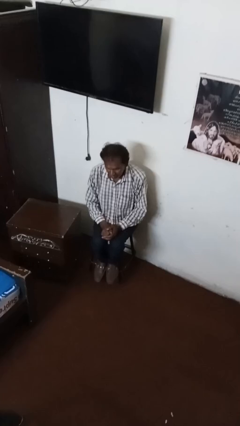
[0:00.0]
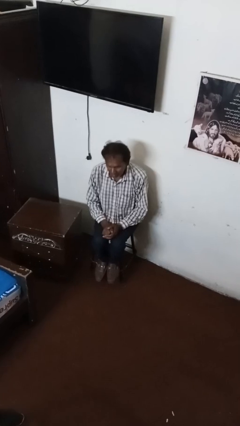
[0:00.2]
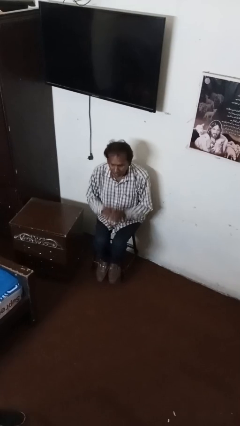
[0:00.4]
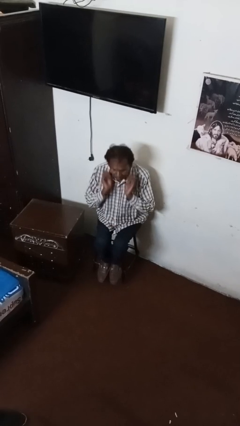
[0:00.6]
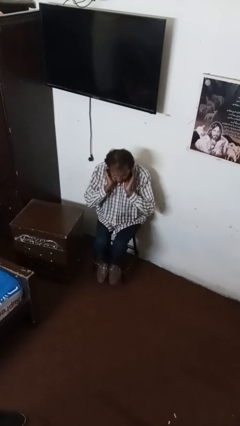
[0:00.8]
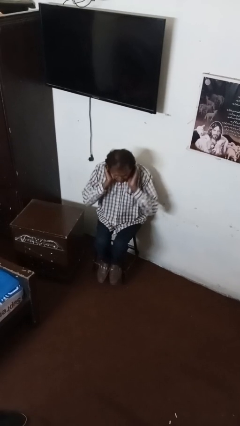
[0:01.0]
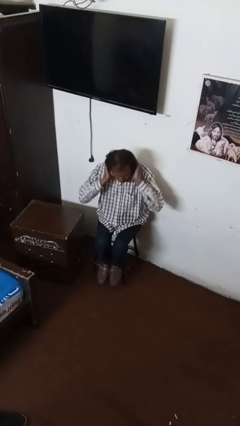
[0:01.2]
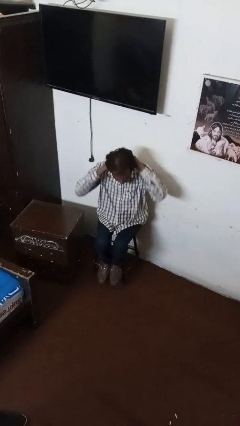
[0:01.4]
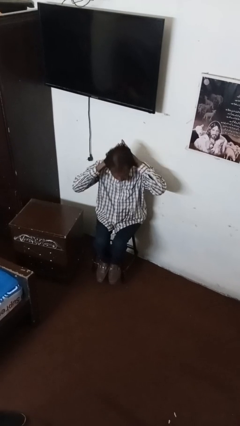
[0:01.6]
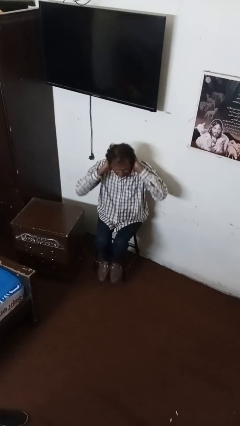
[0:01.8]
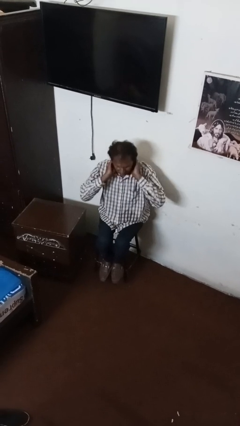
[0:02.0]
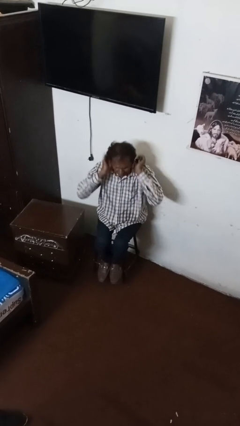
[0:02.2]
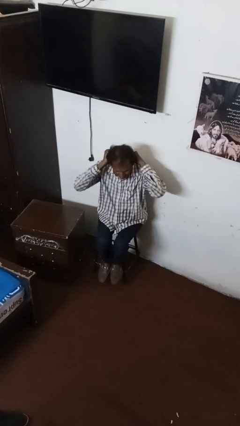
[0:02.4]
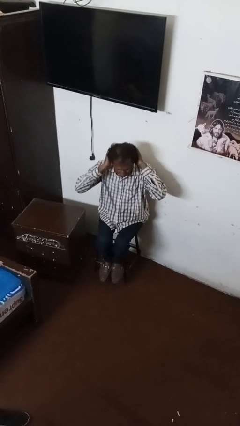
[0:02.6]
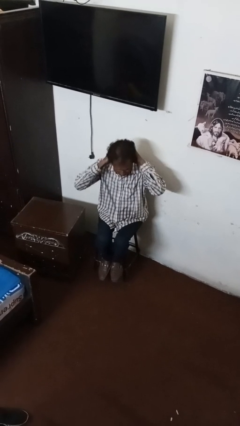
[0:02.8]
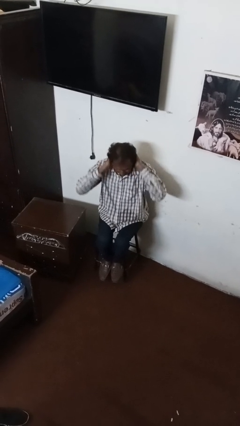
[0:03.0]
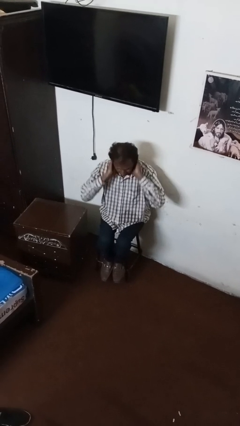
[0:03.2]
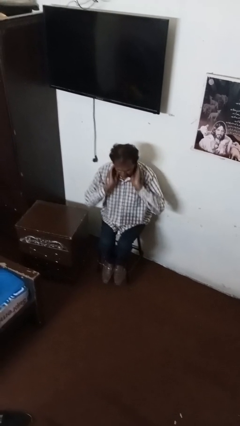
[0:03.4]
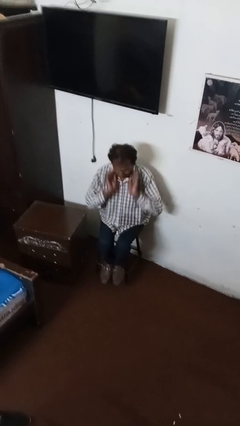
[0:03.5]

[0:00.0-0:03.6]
person strokes hair

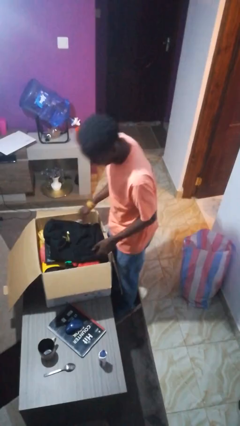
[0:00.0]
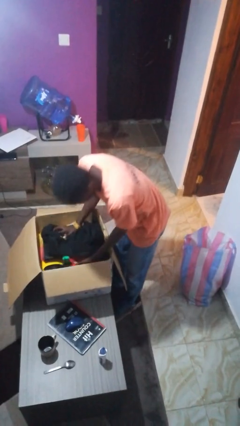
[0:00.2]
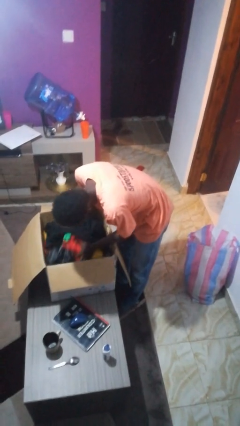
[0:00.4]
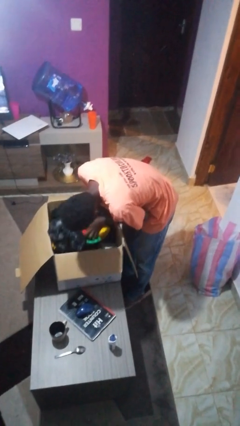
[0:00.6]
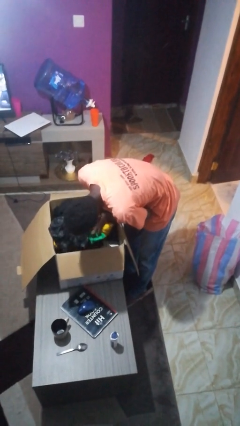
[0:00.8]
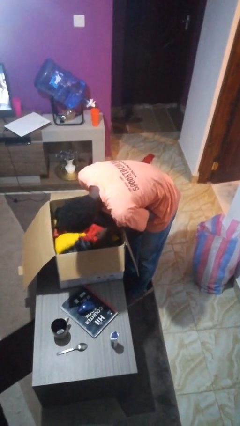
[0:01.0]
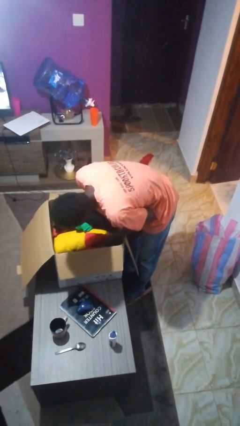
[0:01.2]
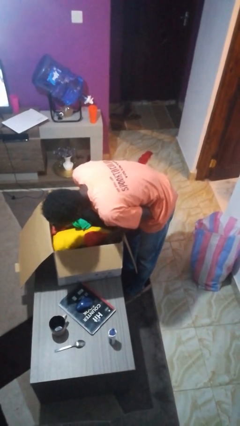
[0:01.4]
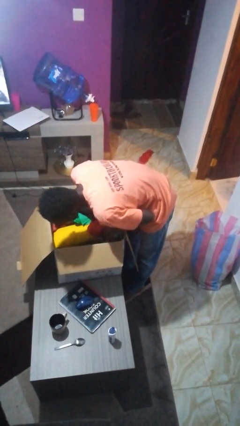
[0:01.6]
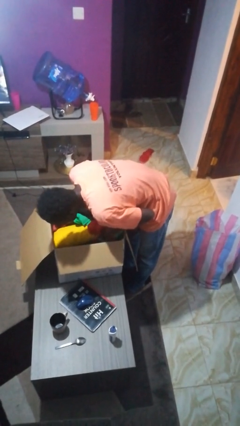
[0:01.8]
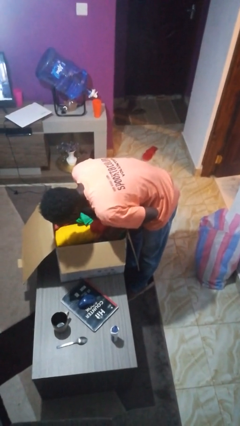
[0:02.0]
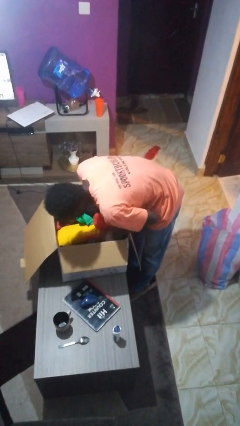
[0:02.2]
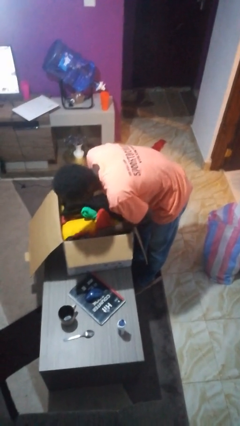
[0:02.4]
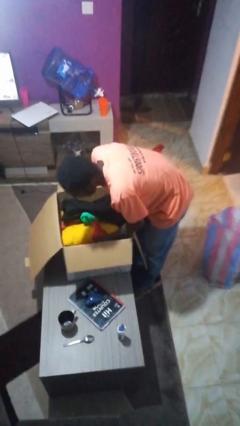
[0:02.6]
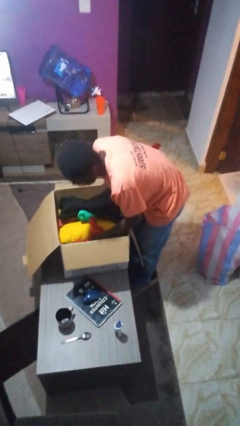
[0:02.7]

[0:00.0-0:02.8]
person searches in box

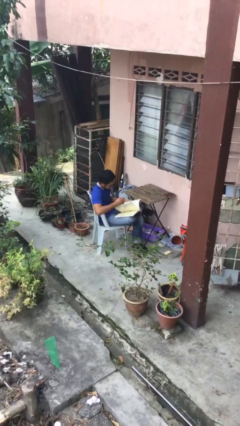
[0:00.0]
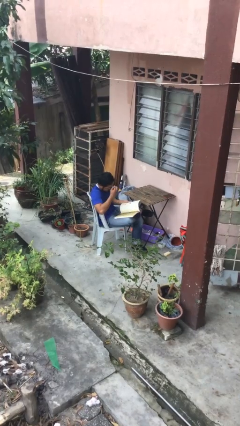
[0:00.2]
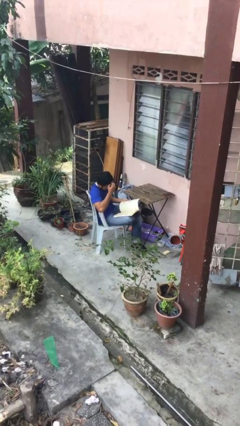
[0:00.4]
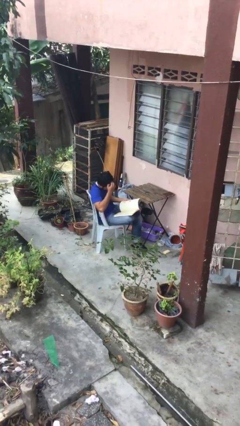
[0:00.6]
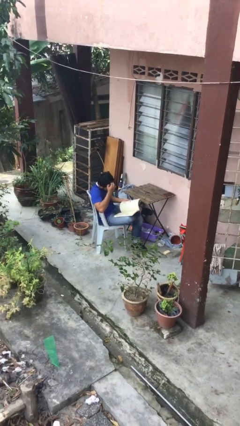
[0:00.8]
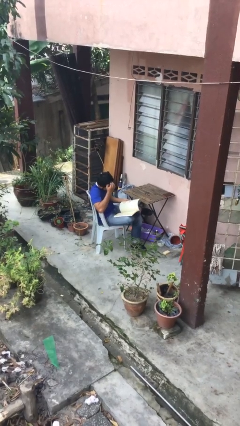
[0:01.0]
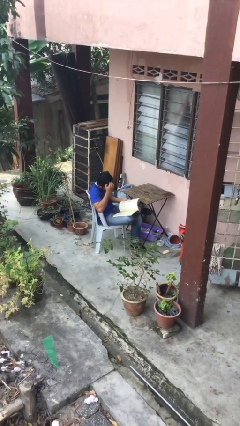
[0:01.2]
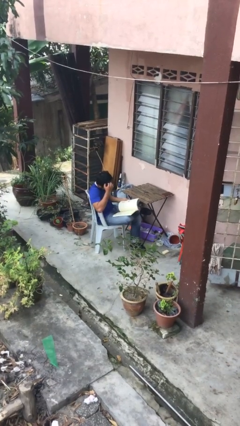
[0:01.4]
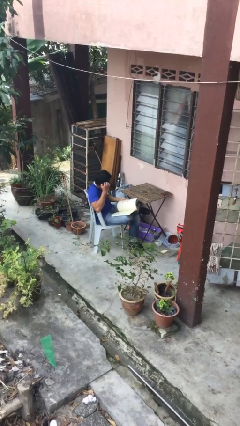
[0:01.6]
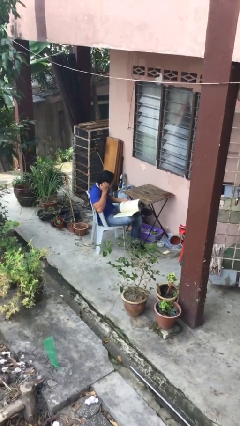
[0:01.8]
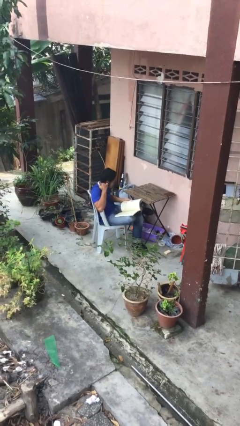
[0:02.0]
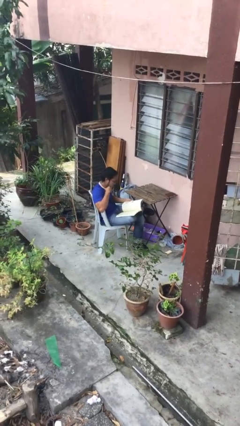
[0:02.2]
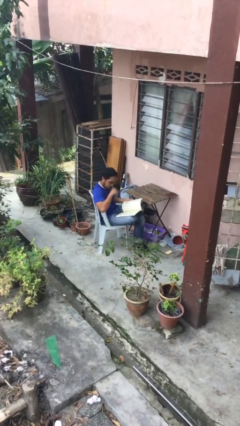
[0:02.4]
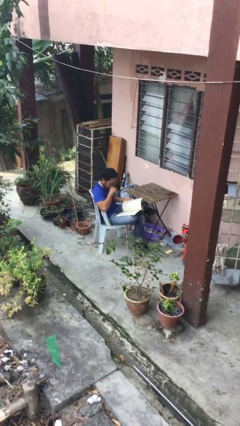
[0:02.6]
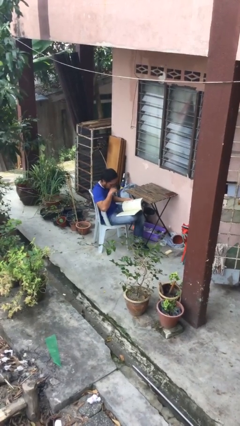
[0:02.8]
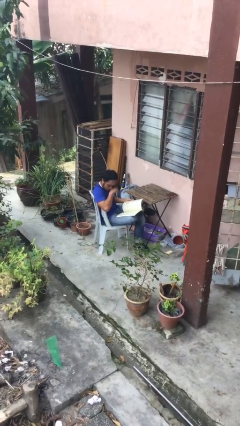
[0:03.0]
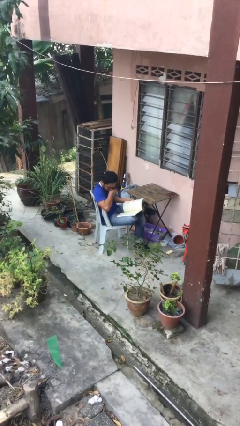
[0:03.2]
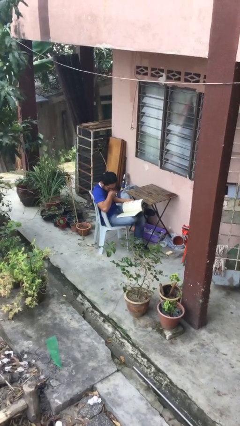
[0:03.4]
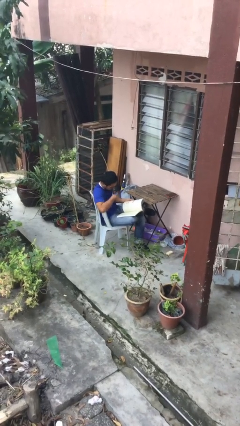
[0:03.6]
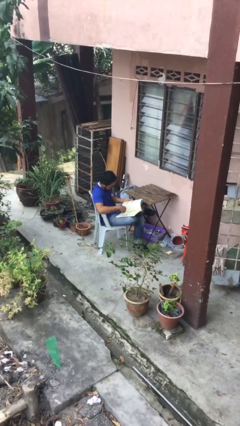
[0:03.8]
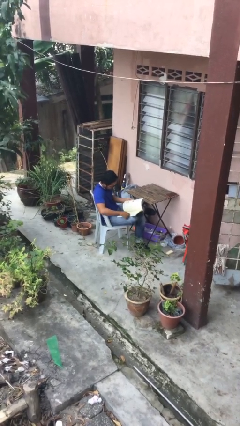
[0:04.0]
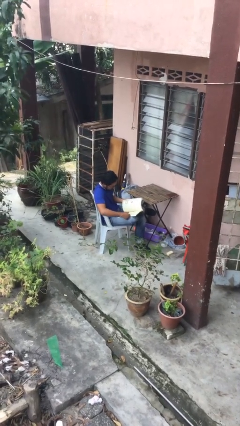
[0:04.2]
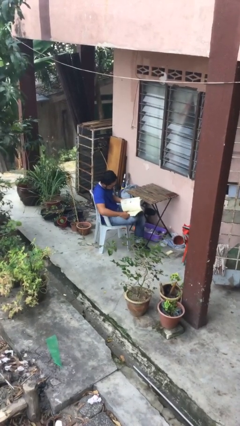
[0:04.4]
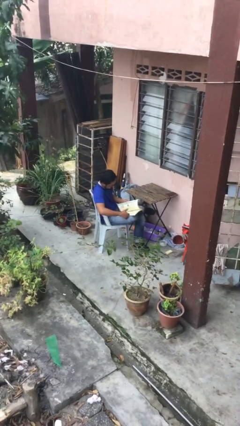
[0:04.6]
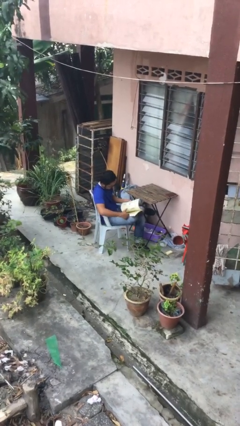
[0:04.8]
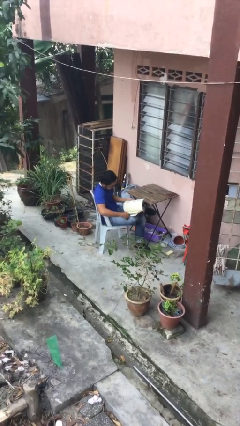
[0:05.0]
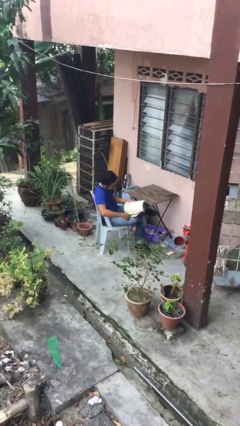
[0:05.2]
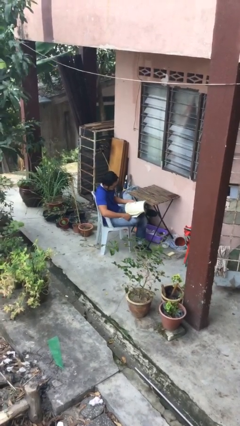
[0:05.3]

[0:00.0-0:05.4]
person reads document

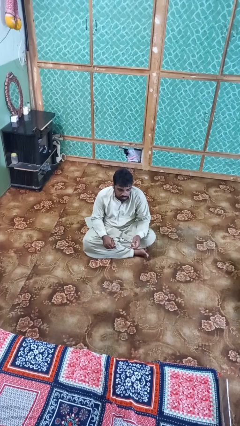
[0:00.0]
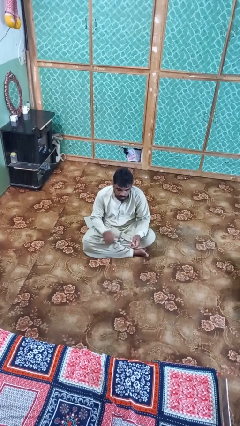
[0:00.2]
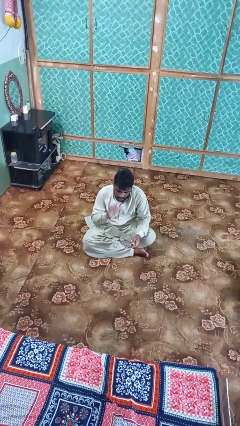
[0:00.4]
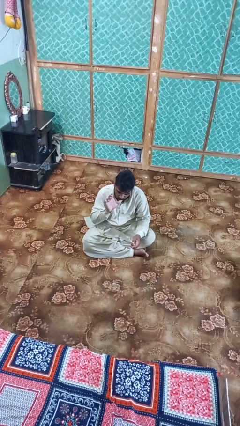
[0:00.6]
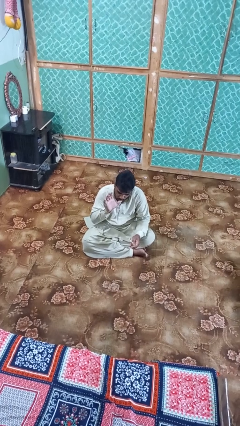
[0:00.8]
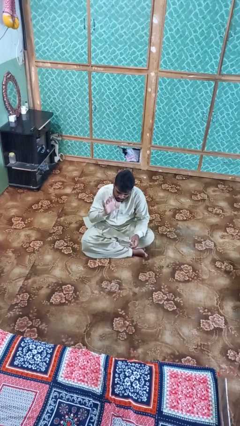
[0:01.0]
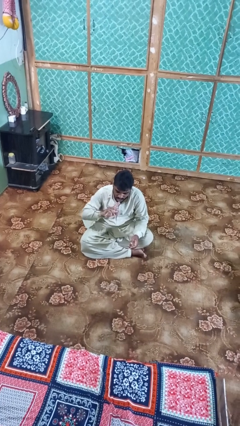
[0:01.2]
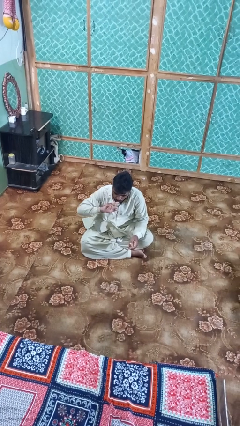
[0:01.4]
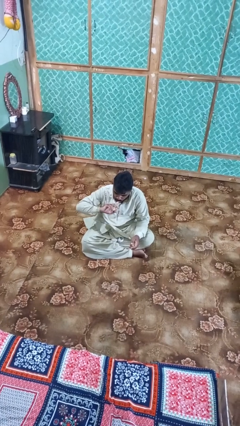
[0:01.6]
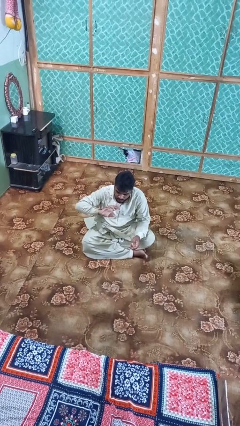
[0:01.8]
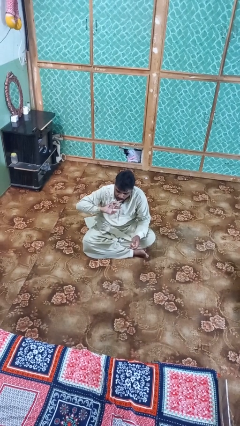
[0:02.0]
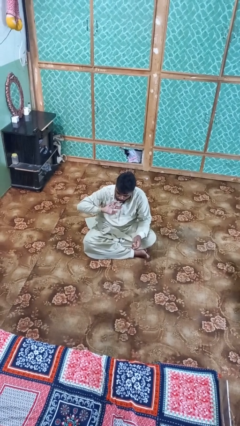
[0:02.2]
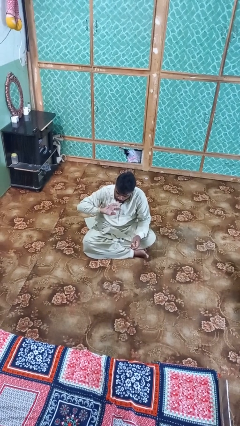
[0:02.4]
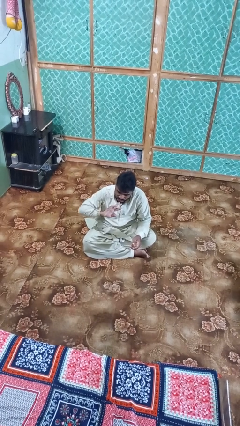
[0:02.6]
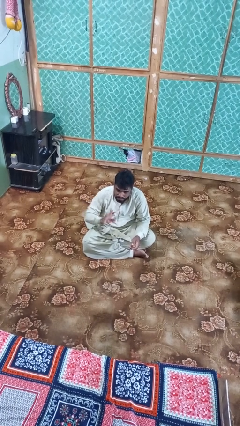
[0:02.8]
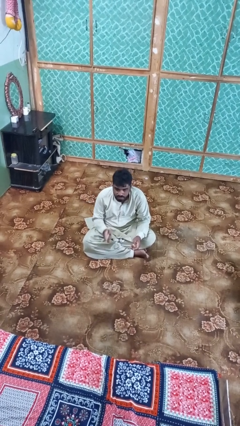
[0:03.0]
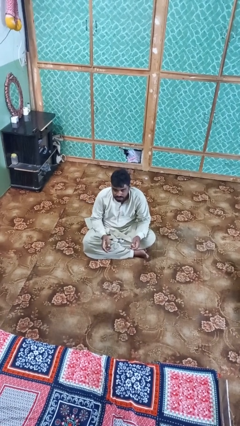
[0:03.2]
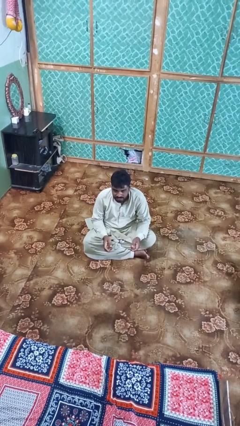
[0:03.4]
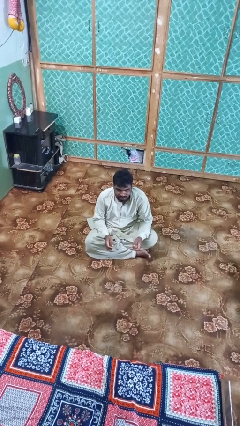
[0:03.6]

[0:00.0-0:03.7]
person licks fingers

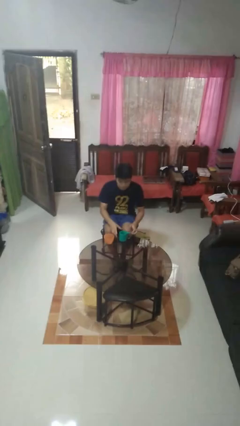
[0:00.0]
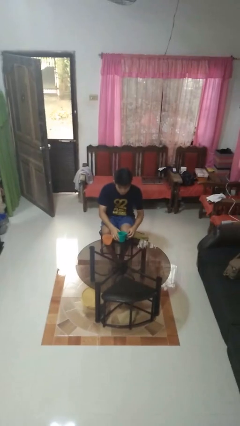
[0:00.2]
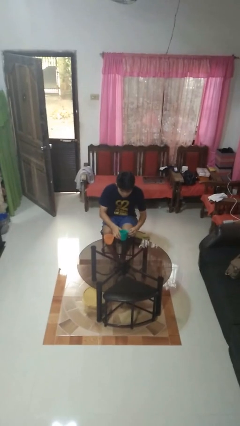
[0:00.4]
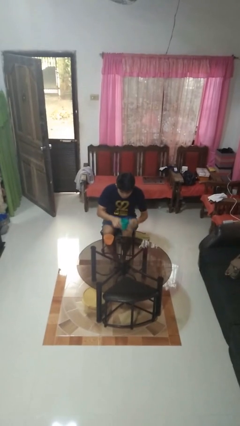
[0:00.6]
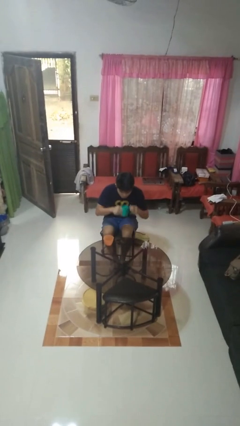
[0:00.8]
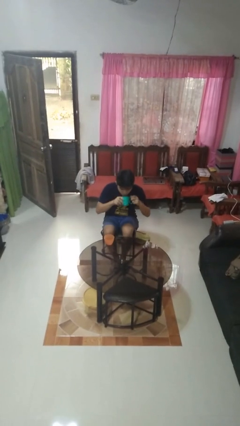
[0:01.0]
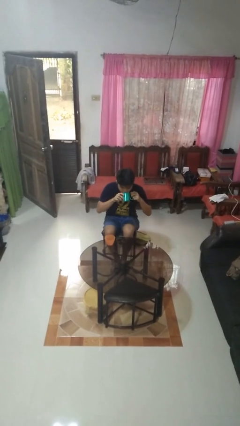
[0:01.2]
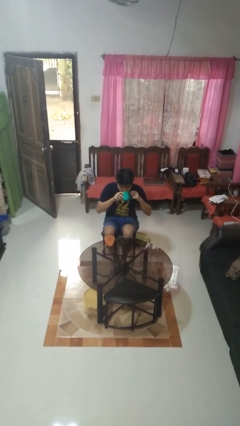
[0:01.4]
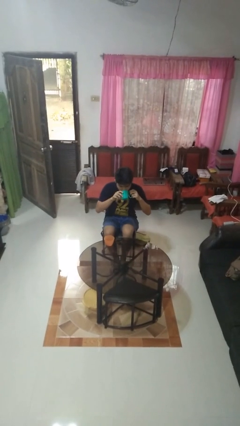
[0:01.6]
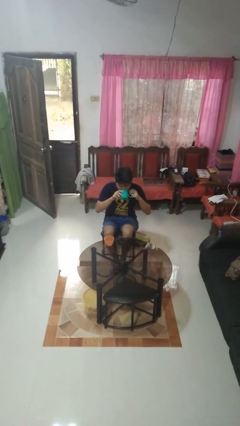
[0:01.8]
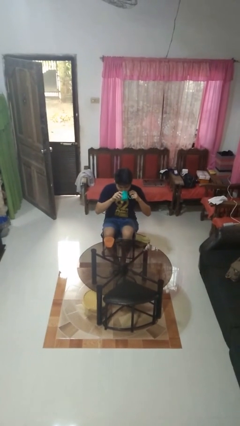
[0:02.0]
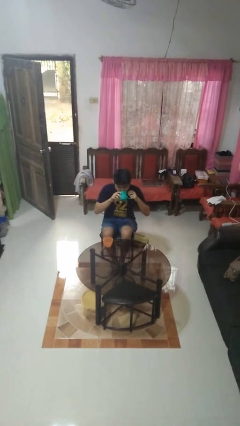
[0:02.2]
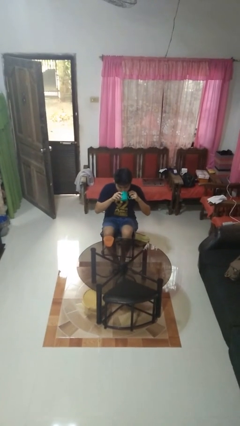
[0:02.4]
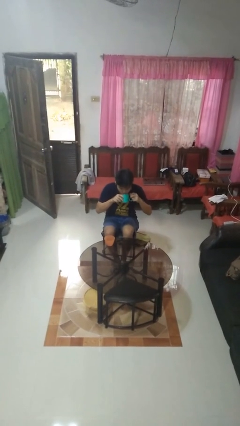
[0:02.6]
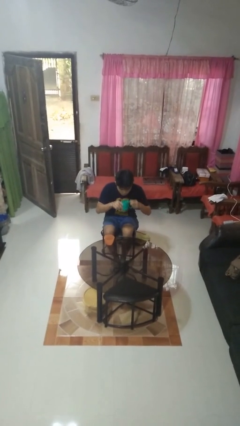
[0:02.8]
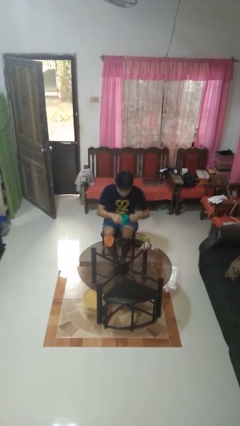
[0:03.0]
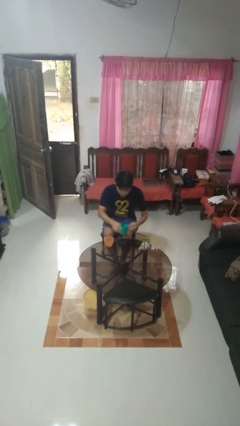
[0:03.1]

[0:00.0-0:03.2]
person drinks from cup
